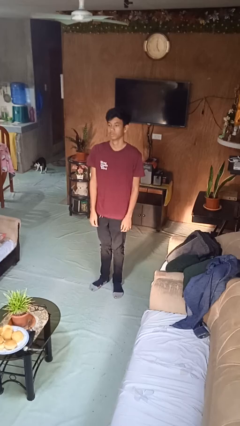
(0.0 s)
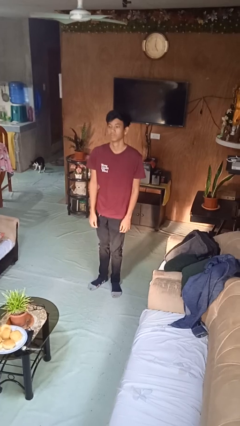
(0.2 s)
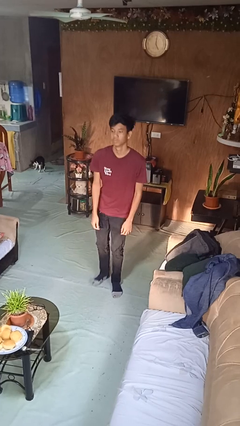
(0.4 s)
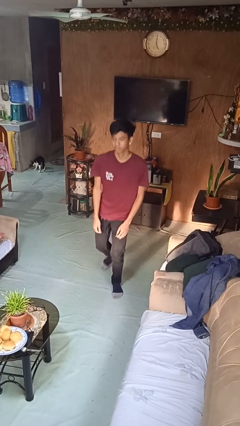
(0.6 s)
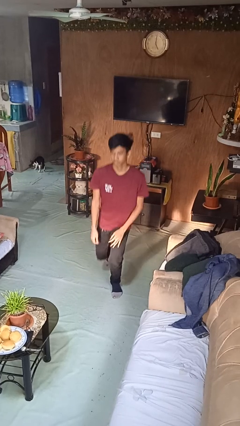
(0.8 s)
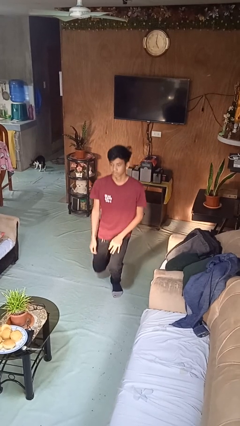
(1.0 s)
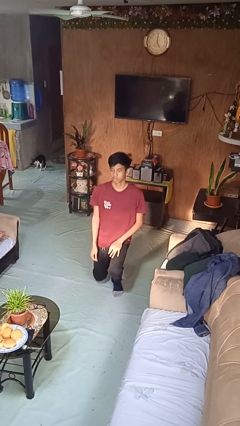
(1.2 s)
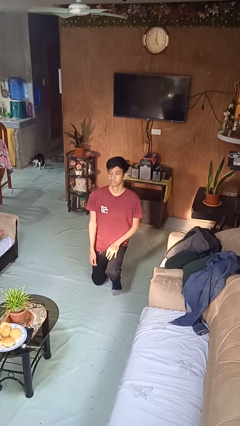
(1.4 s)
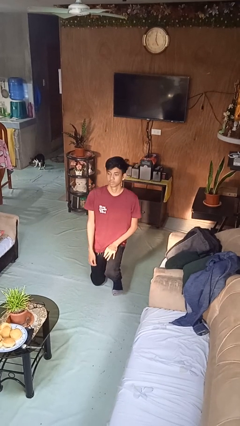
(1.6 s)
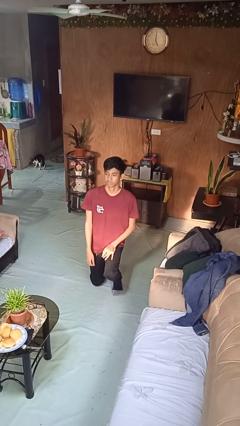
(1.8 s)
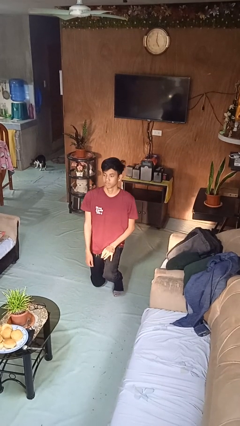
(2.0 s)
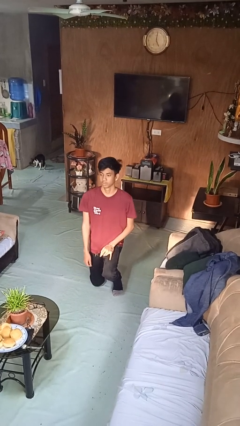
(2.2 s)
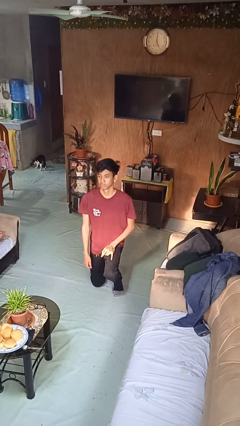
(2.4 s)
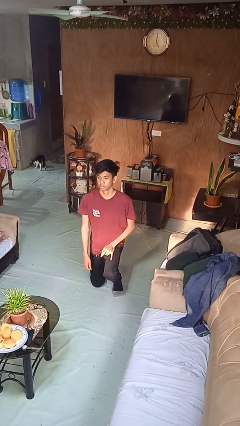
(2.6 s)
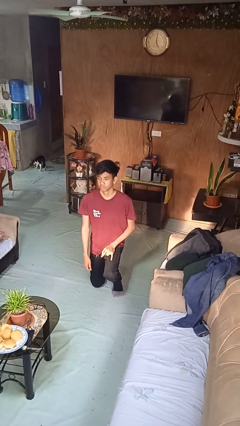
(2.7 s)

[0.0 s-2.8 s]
person kneels

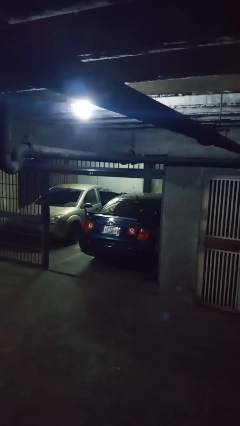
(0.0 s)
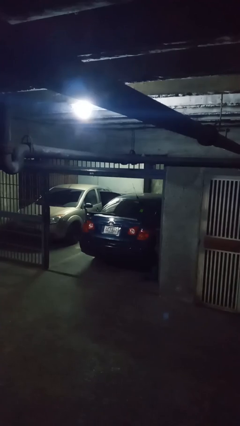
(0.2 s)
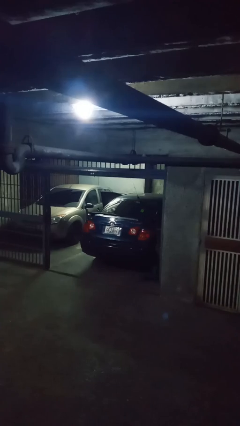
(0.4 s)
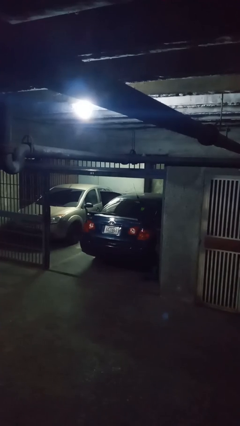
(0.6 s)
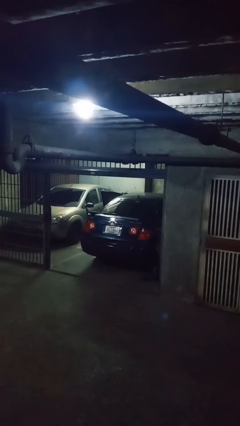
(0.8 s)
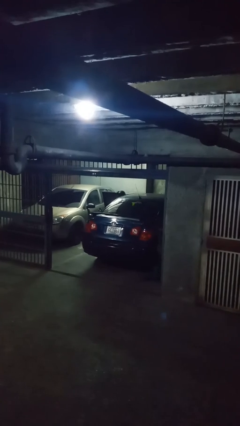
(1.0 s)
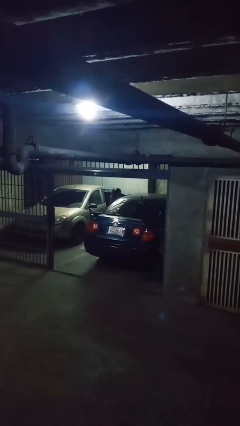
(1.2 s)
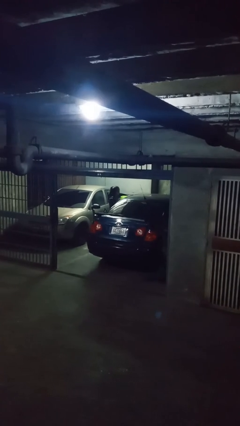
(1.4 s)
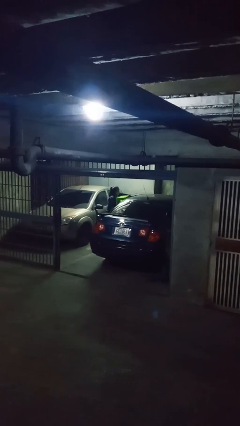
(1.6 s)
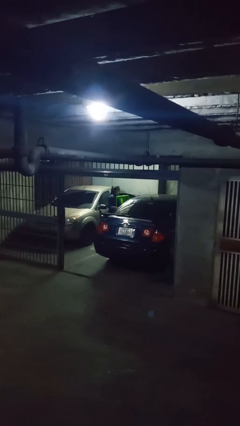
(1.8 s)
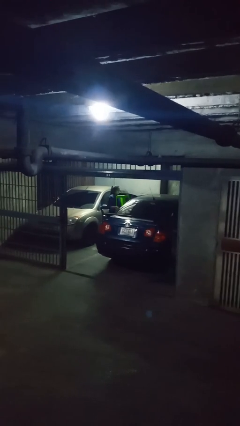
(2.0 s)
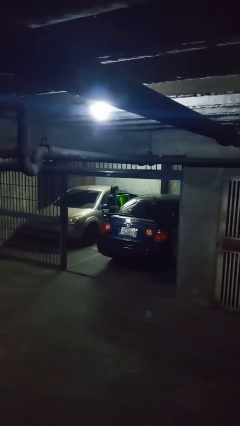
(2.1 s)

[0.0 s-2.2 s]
person unloads car

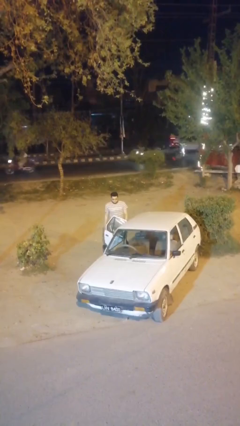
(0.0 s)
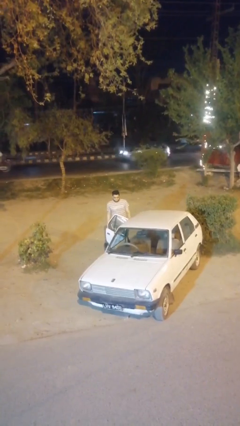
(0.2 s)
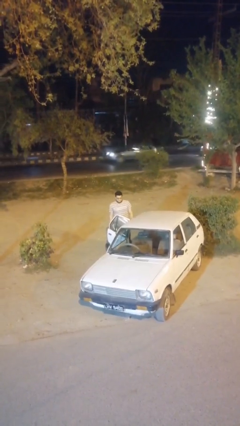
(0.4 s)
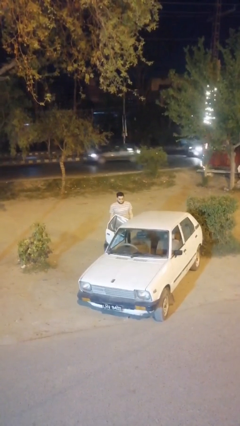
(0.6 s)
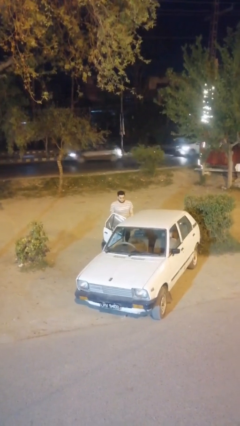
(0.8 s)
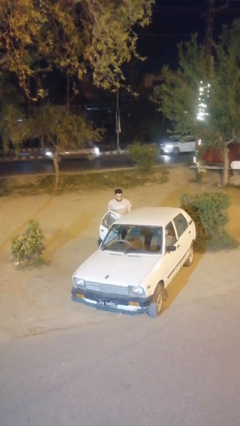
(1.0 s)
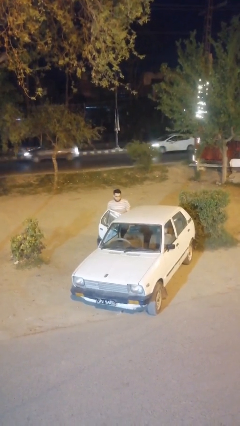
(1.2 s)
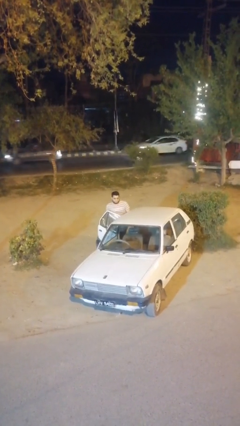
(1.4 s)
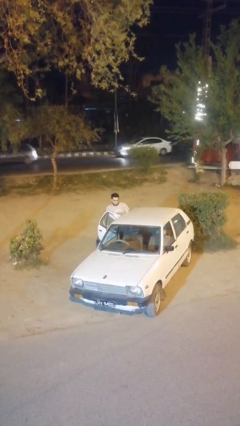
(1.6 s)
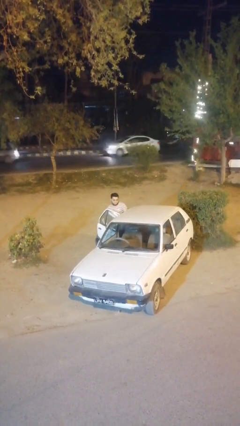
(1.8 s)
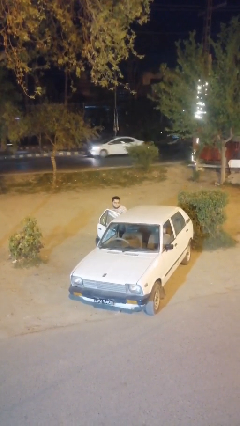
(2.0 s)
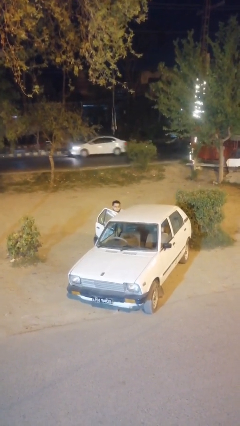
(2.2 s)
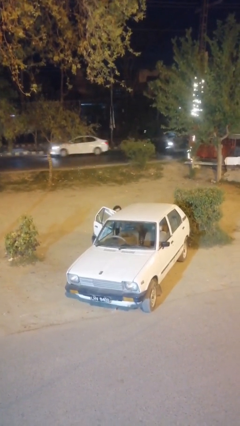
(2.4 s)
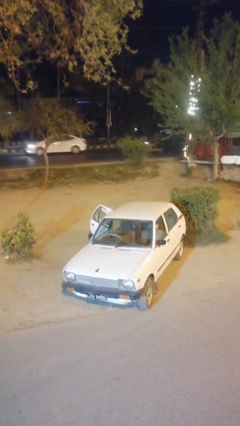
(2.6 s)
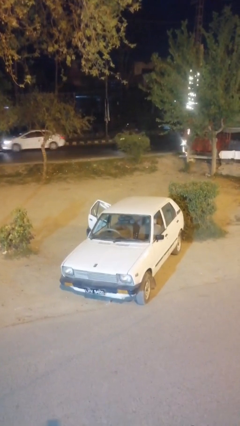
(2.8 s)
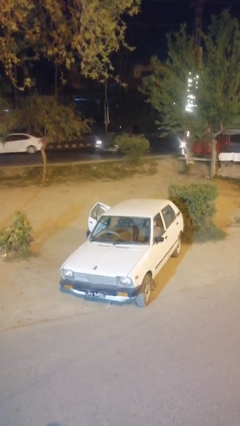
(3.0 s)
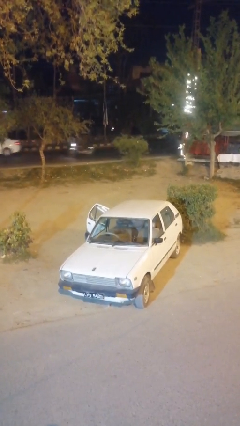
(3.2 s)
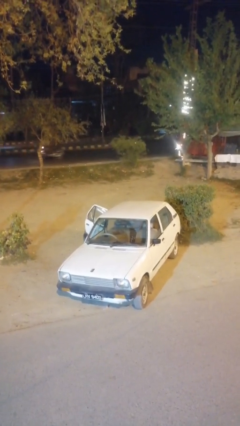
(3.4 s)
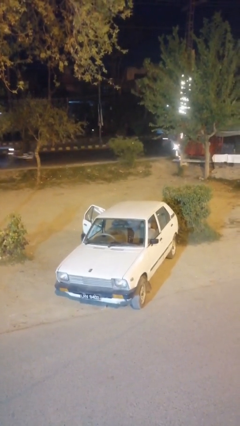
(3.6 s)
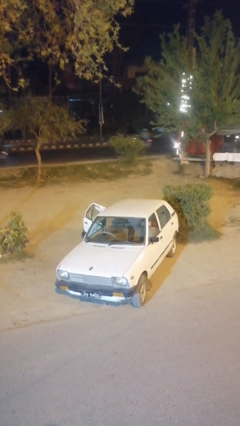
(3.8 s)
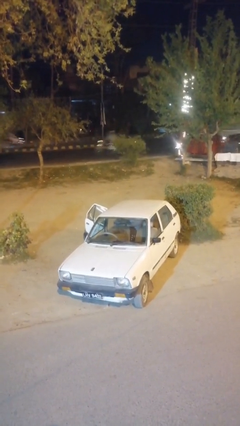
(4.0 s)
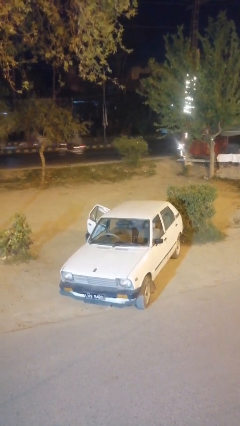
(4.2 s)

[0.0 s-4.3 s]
person enters car

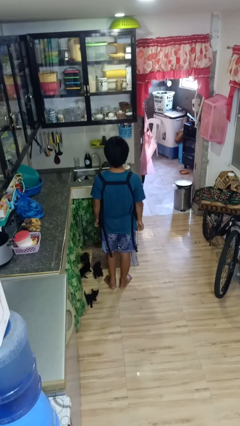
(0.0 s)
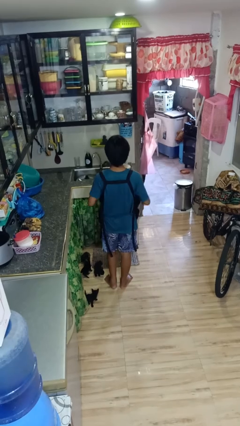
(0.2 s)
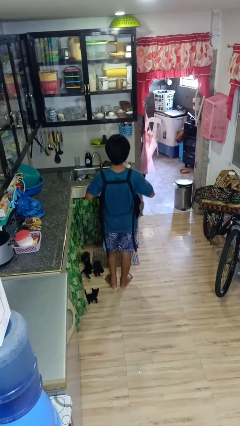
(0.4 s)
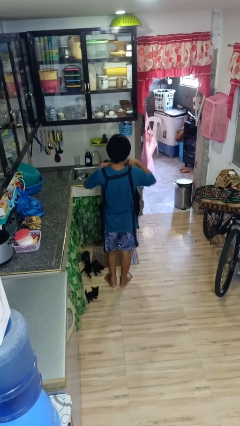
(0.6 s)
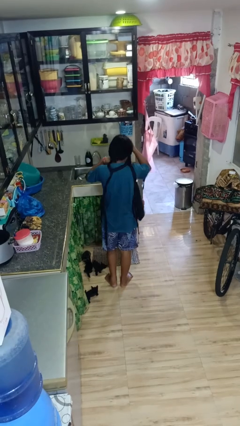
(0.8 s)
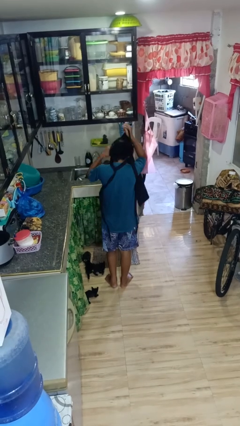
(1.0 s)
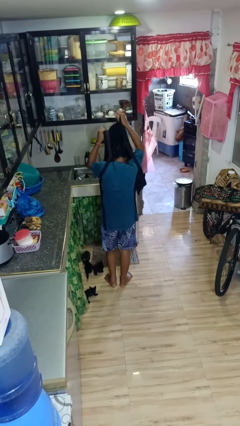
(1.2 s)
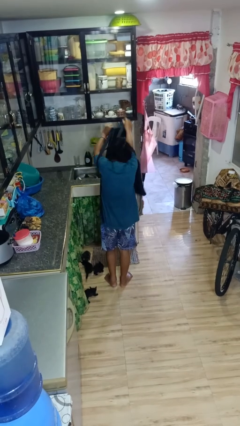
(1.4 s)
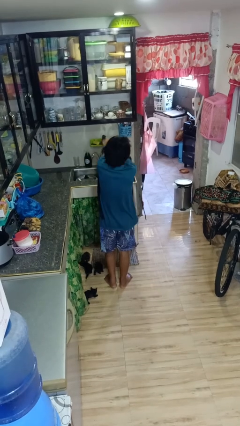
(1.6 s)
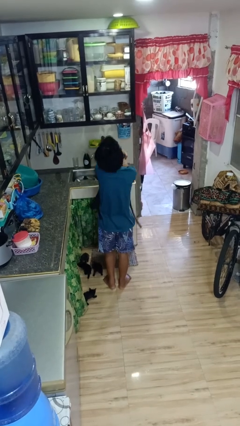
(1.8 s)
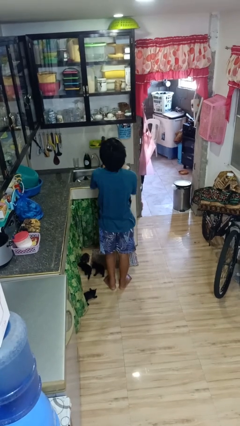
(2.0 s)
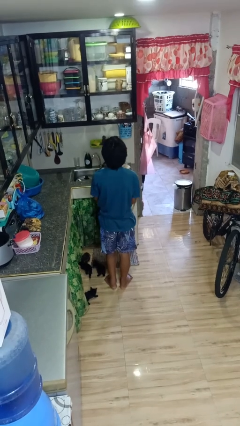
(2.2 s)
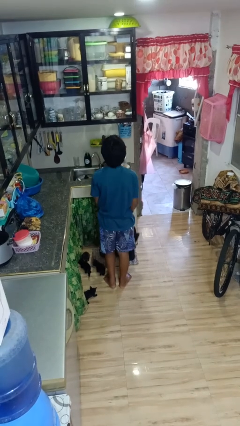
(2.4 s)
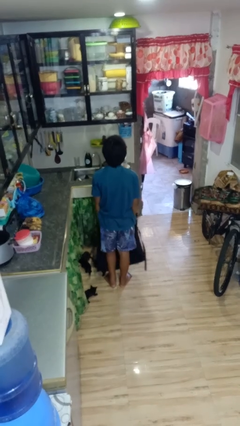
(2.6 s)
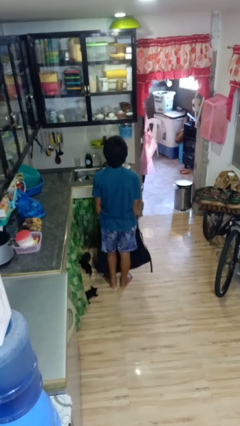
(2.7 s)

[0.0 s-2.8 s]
person takes off apron

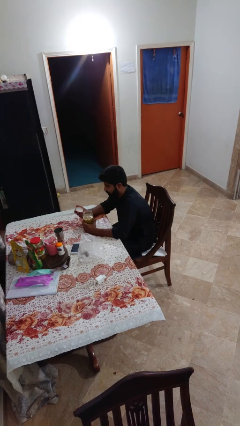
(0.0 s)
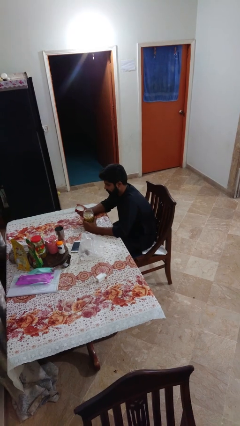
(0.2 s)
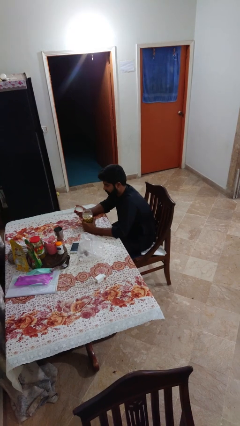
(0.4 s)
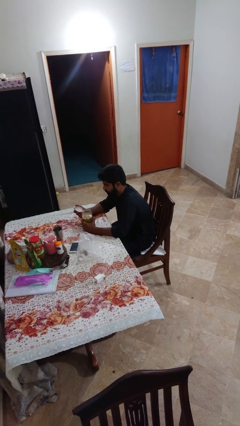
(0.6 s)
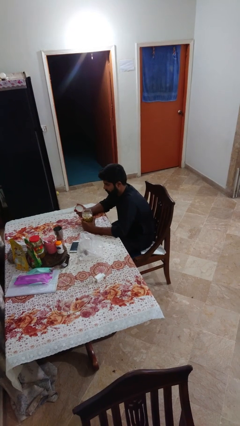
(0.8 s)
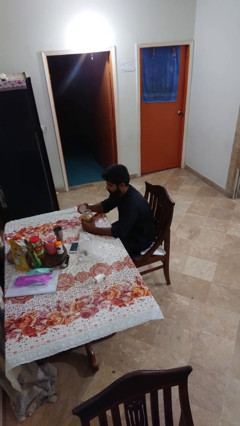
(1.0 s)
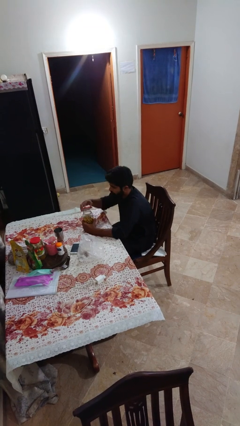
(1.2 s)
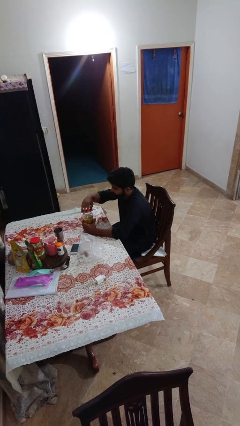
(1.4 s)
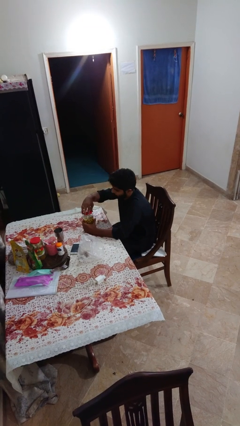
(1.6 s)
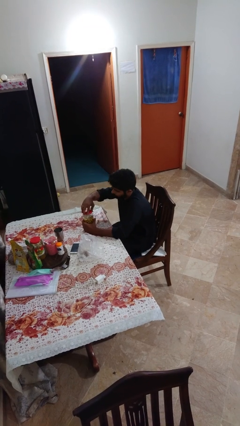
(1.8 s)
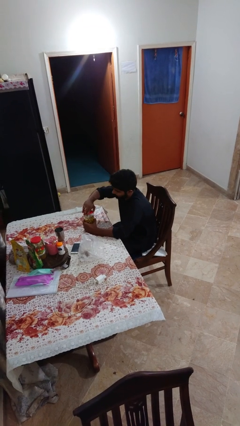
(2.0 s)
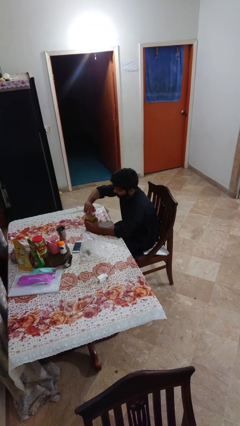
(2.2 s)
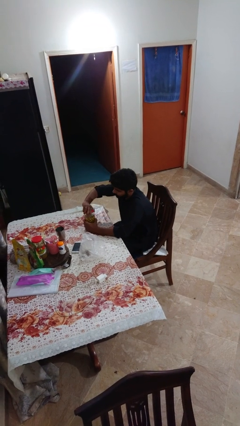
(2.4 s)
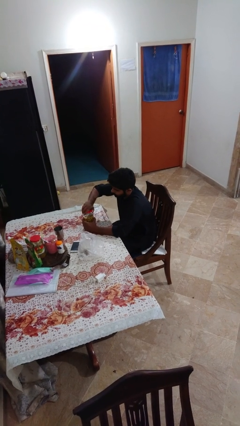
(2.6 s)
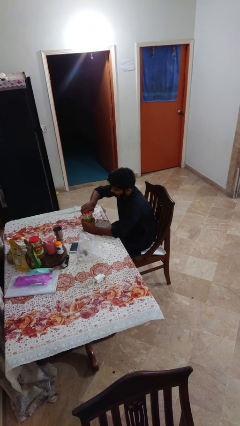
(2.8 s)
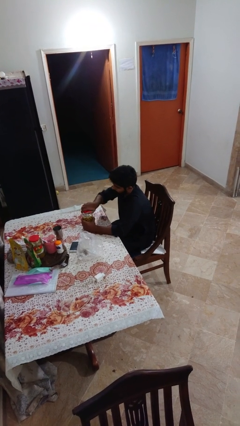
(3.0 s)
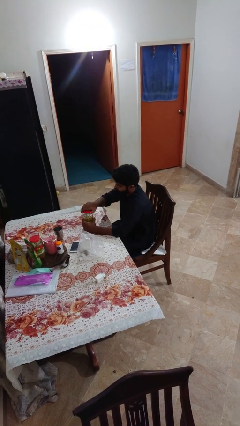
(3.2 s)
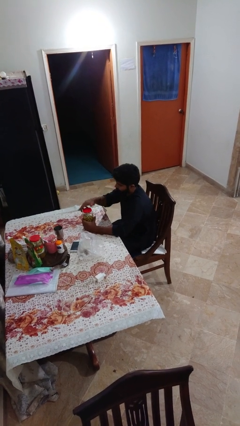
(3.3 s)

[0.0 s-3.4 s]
person closes jar

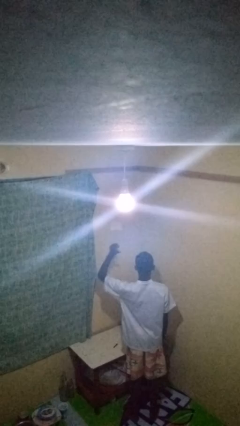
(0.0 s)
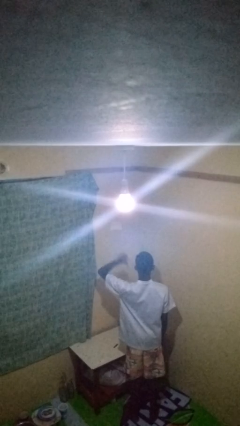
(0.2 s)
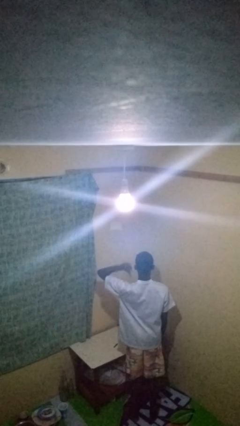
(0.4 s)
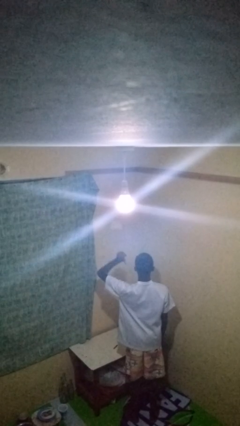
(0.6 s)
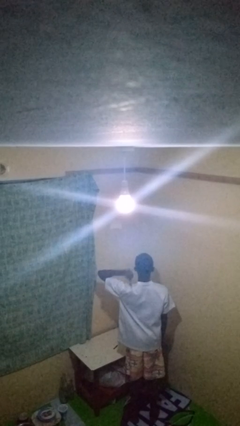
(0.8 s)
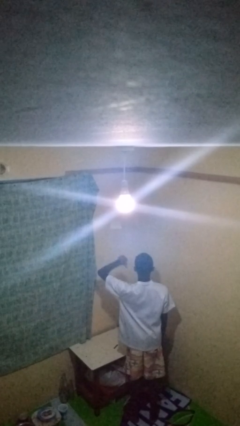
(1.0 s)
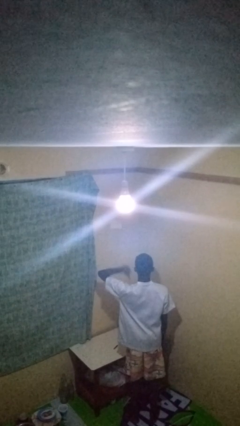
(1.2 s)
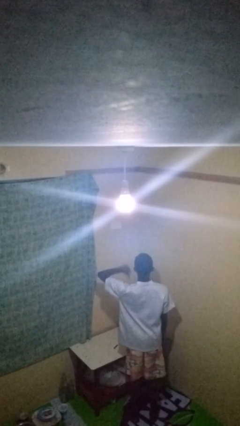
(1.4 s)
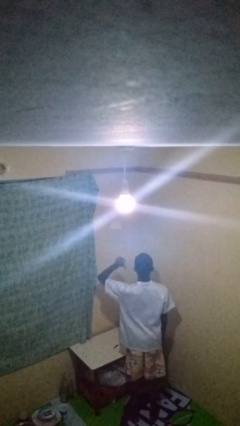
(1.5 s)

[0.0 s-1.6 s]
person gestures behind me

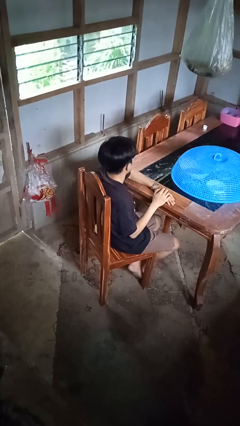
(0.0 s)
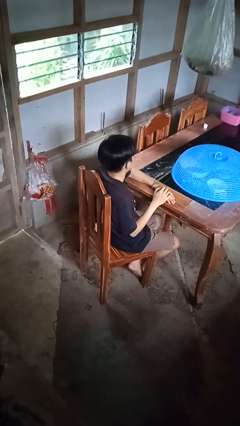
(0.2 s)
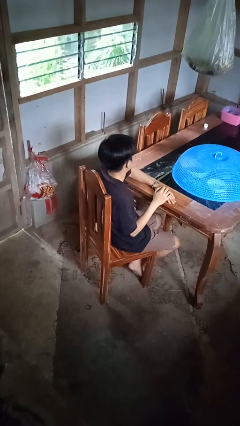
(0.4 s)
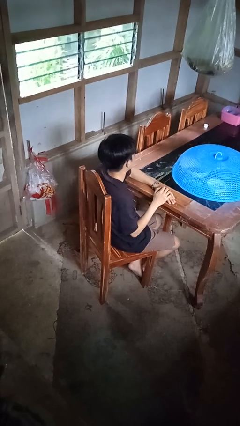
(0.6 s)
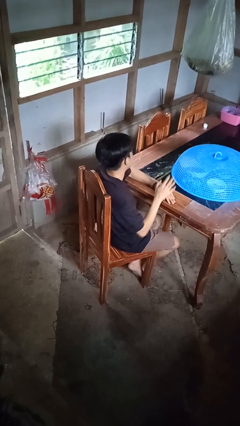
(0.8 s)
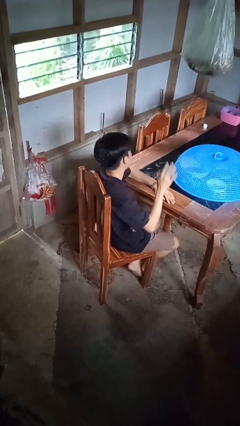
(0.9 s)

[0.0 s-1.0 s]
person gestures raise hand
